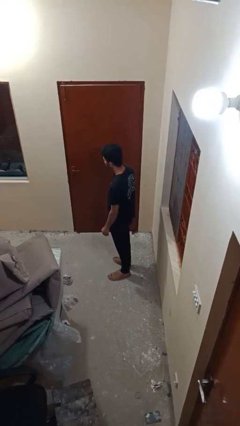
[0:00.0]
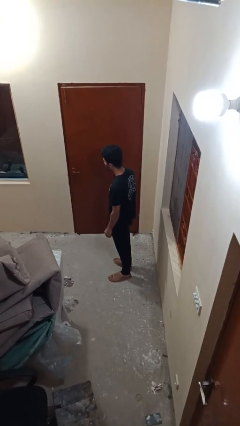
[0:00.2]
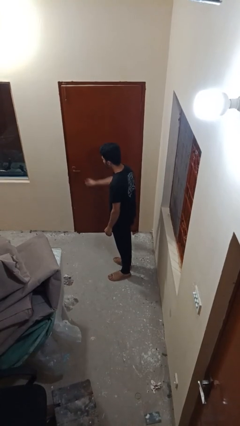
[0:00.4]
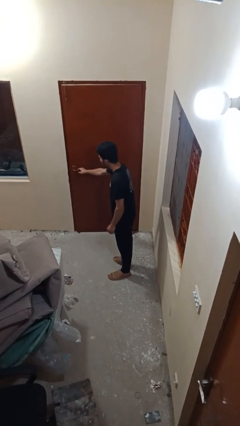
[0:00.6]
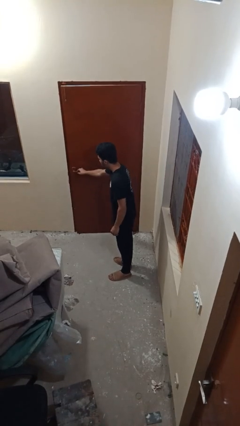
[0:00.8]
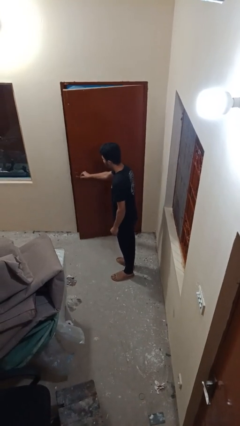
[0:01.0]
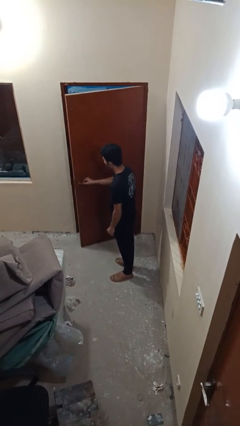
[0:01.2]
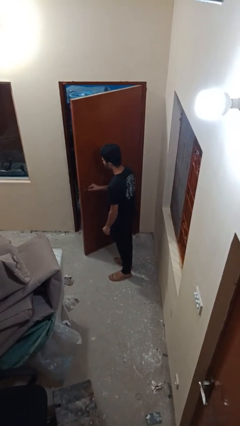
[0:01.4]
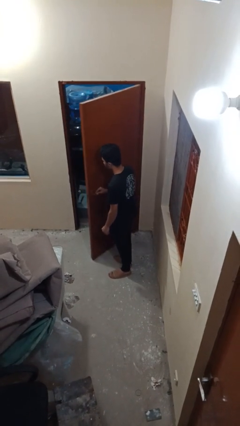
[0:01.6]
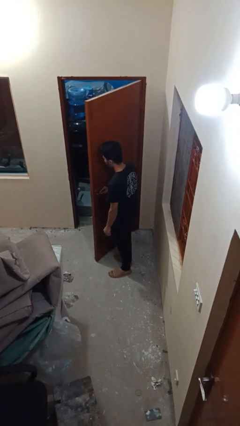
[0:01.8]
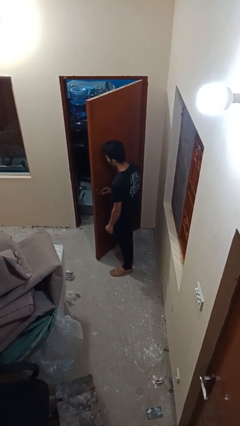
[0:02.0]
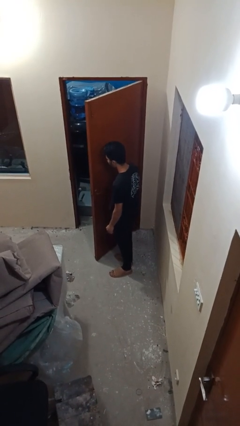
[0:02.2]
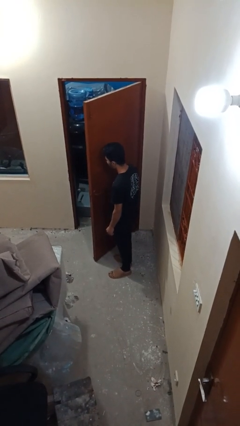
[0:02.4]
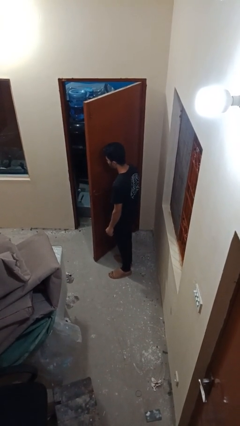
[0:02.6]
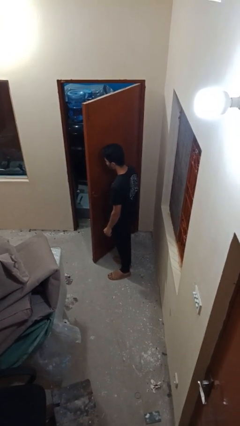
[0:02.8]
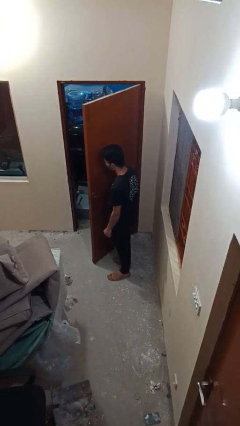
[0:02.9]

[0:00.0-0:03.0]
person opens facility door

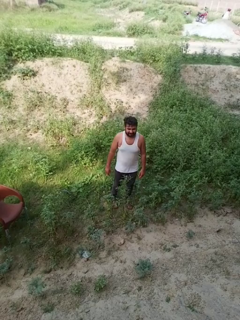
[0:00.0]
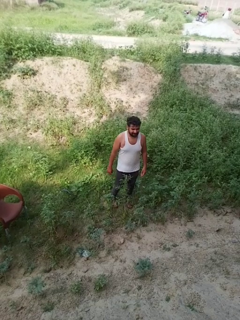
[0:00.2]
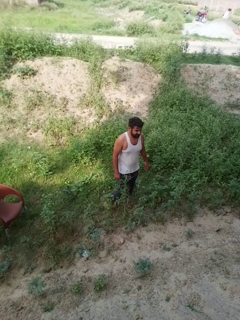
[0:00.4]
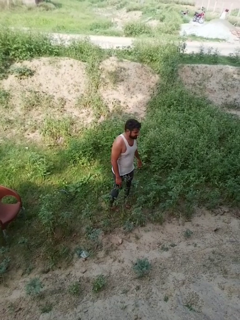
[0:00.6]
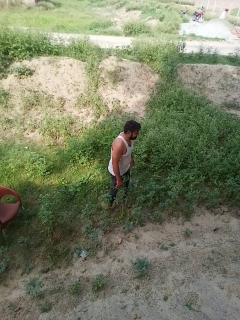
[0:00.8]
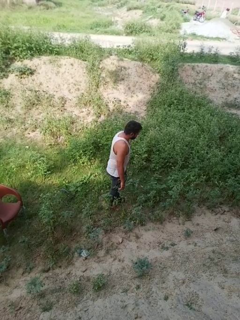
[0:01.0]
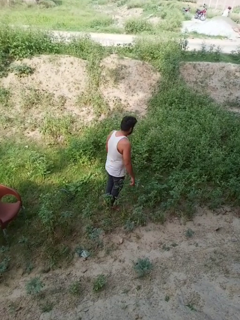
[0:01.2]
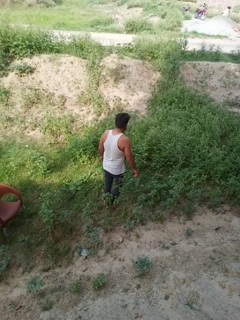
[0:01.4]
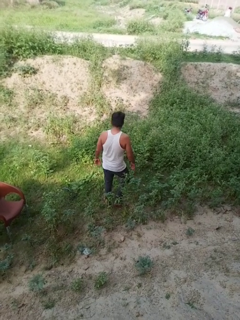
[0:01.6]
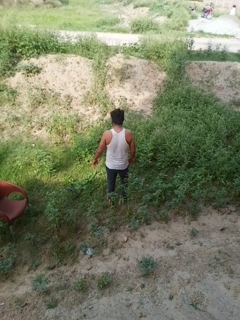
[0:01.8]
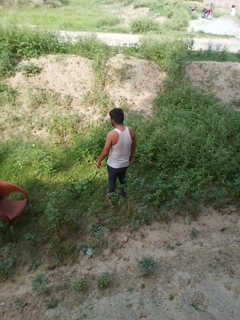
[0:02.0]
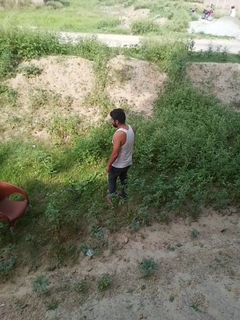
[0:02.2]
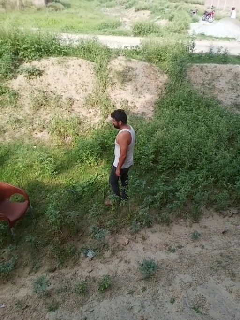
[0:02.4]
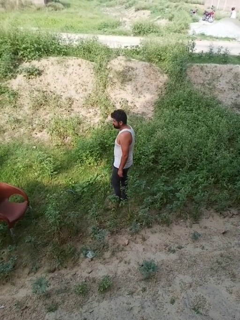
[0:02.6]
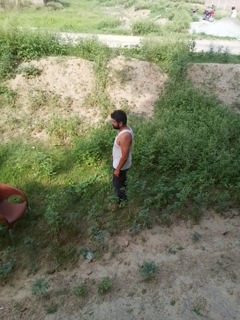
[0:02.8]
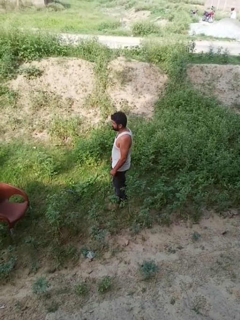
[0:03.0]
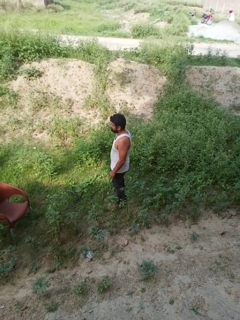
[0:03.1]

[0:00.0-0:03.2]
person twirls

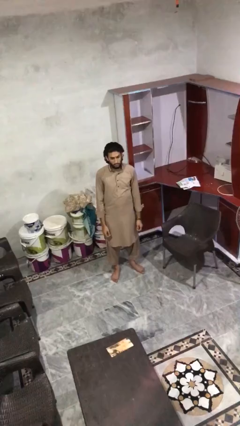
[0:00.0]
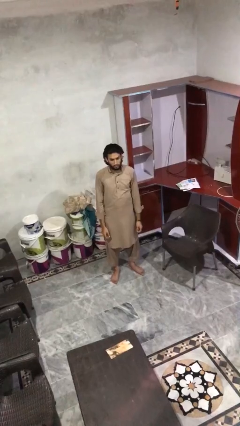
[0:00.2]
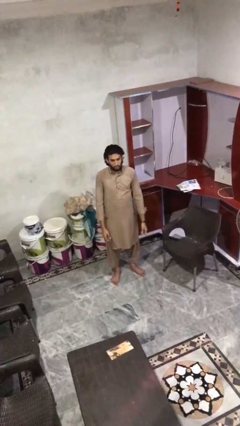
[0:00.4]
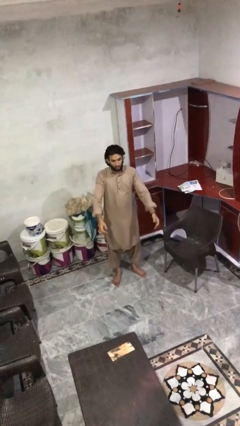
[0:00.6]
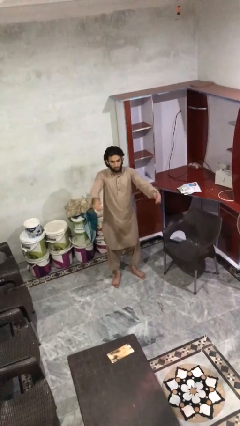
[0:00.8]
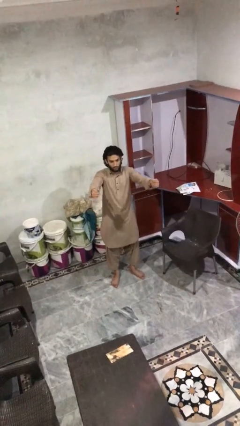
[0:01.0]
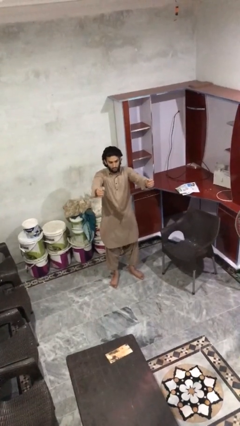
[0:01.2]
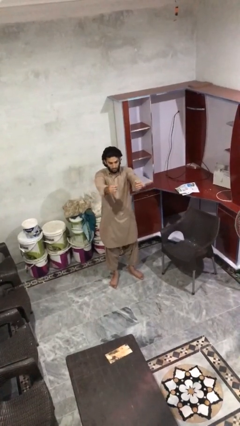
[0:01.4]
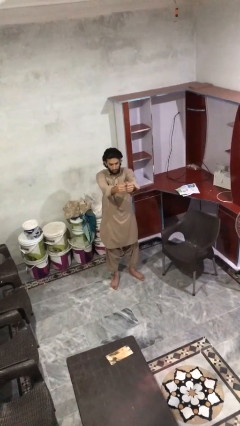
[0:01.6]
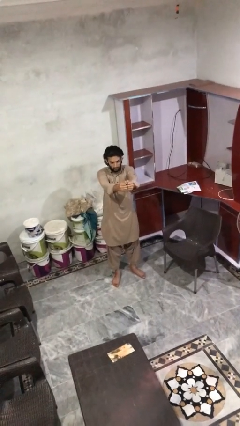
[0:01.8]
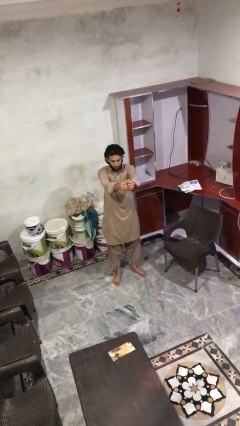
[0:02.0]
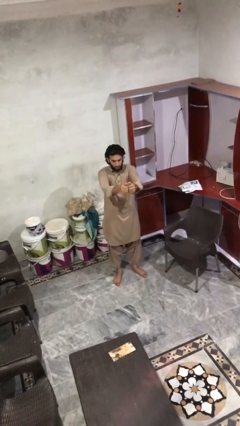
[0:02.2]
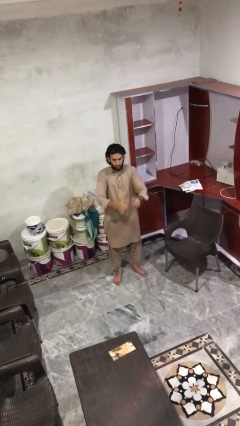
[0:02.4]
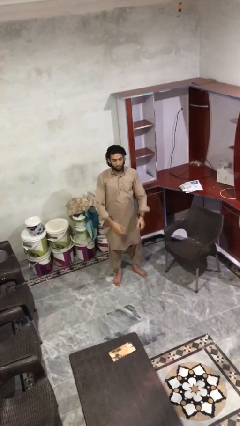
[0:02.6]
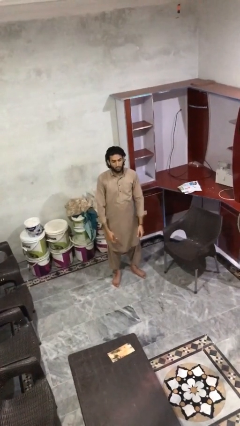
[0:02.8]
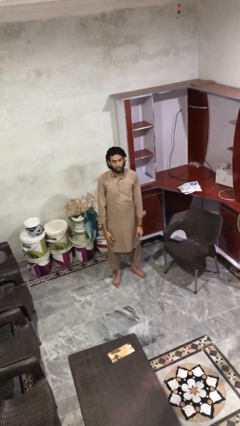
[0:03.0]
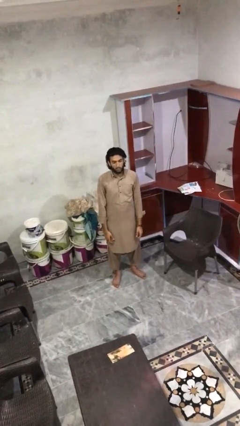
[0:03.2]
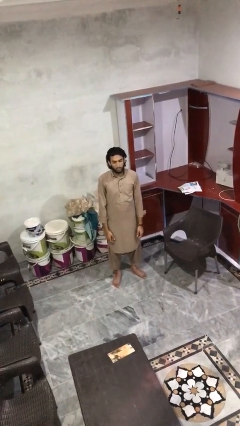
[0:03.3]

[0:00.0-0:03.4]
person gestures zoom out

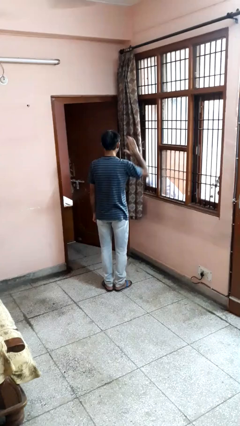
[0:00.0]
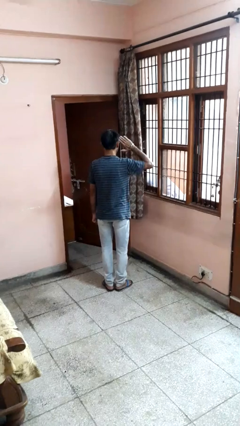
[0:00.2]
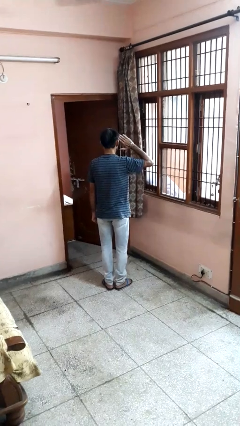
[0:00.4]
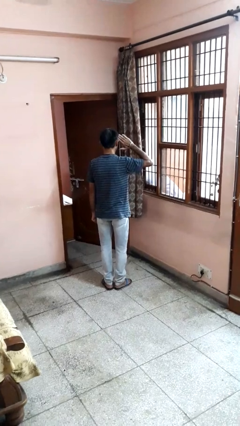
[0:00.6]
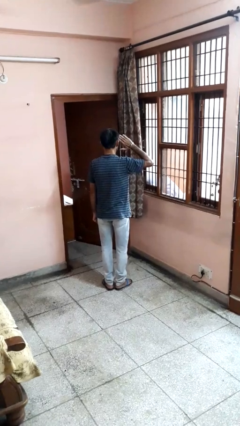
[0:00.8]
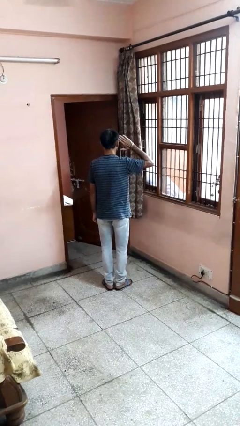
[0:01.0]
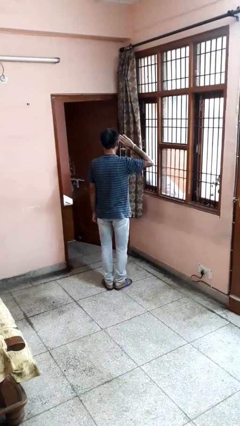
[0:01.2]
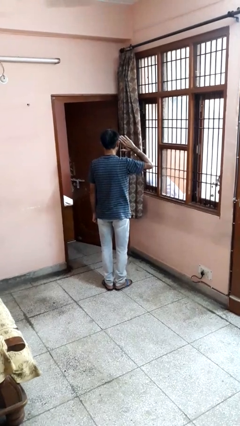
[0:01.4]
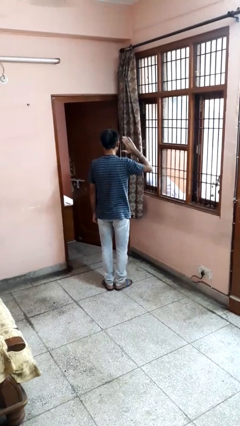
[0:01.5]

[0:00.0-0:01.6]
person salutes

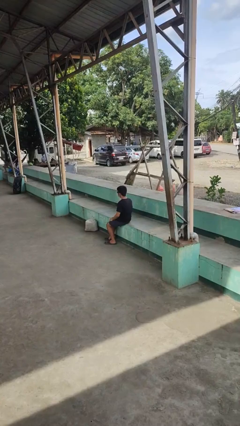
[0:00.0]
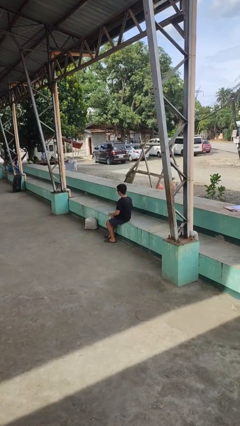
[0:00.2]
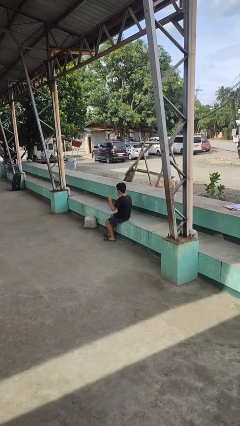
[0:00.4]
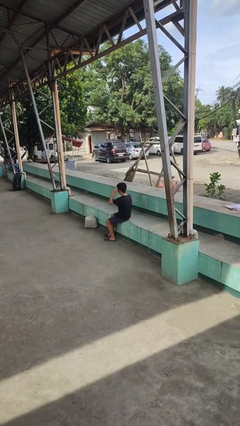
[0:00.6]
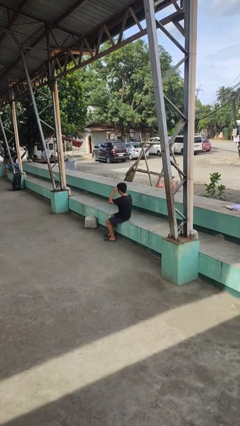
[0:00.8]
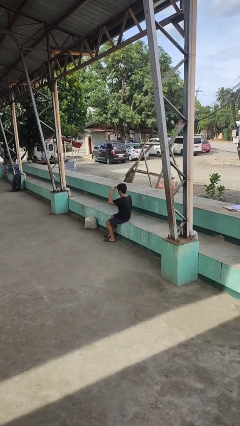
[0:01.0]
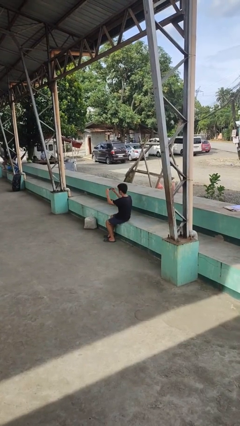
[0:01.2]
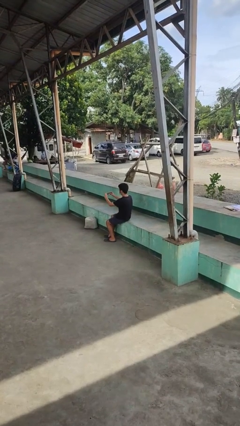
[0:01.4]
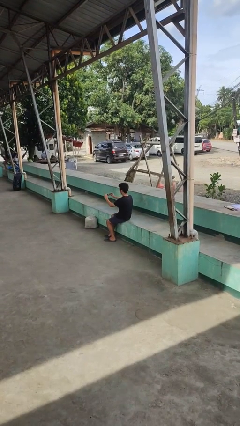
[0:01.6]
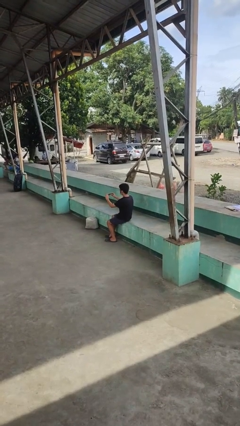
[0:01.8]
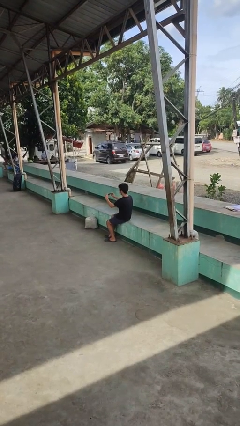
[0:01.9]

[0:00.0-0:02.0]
person takes off sunglasses

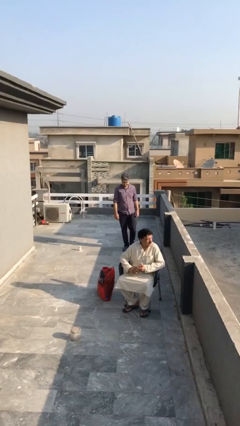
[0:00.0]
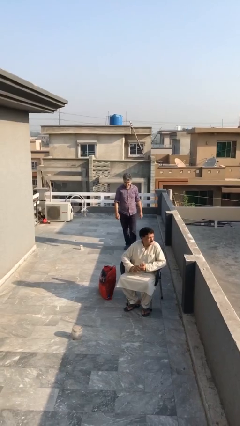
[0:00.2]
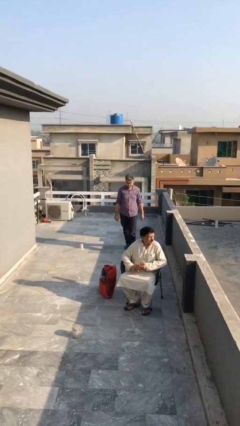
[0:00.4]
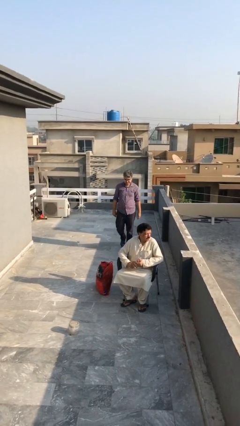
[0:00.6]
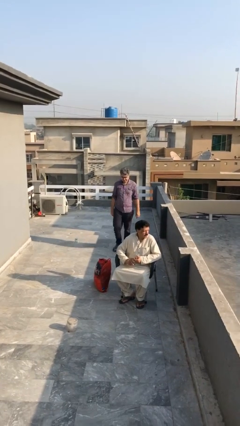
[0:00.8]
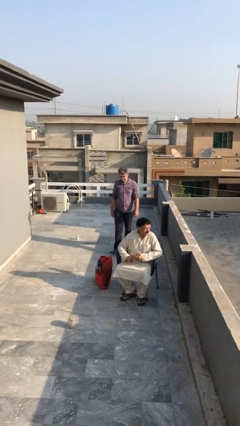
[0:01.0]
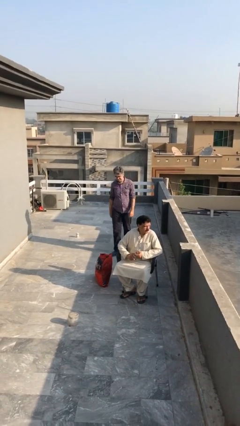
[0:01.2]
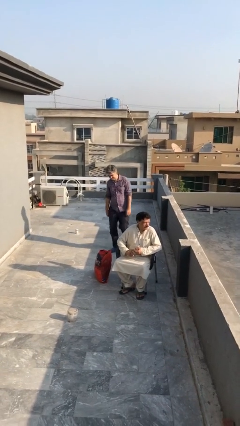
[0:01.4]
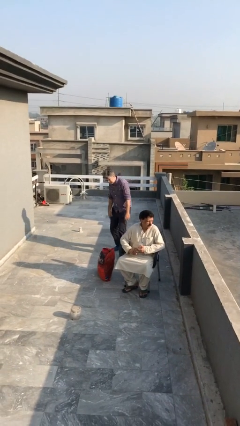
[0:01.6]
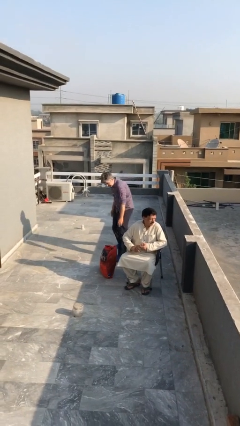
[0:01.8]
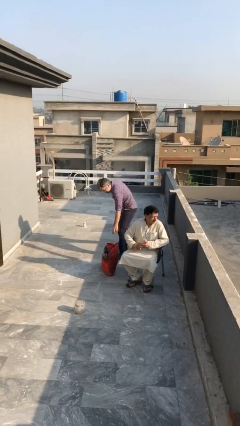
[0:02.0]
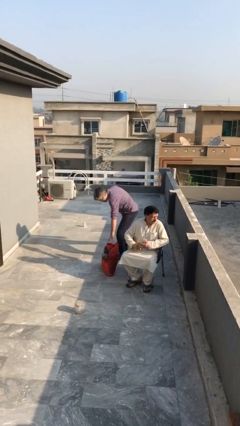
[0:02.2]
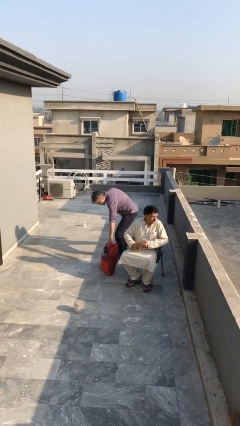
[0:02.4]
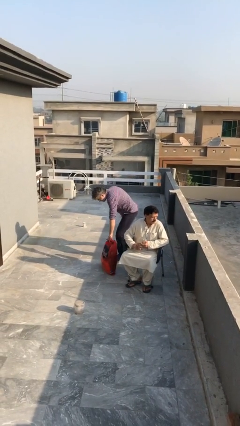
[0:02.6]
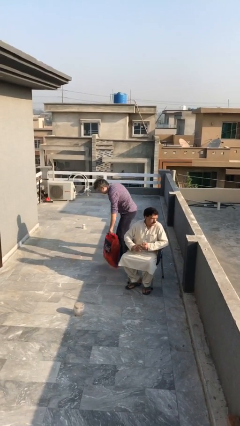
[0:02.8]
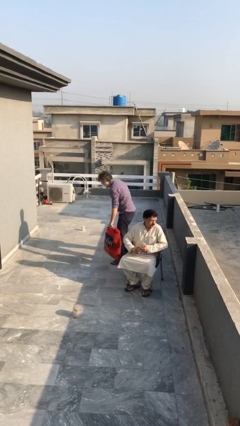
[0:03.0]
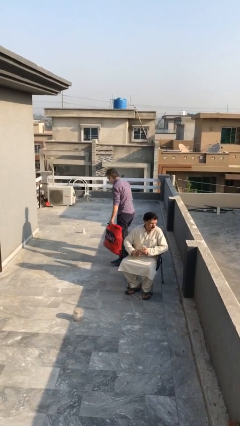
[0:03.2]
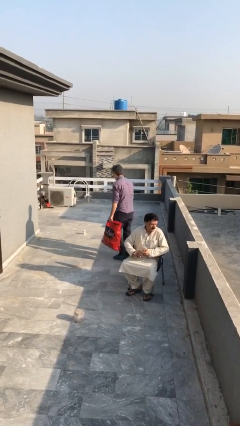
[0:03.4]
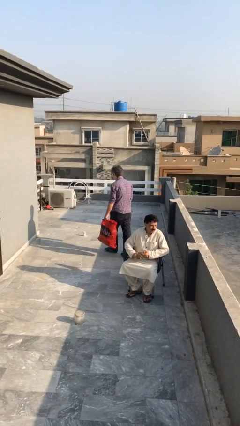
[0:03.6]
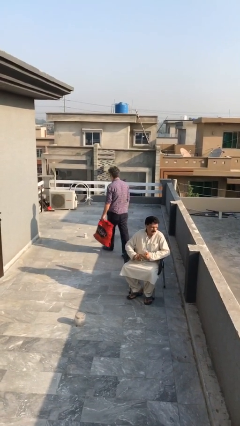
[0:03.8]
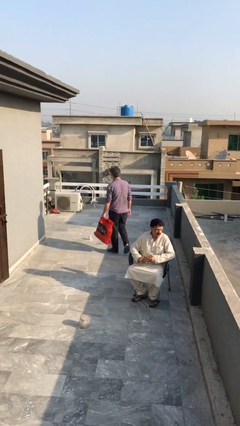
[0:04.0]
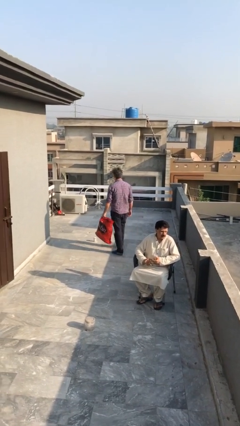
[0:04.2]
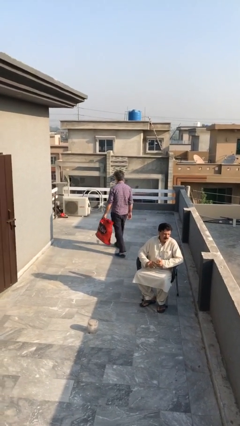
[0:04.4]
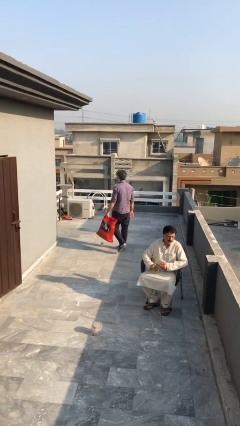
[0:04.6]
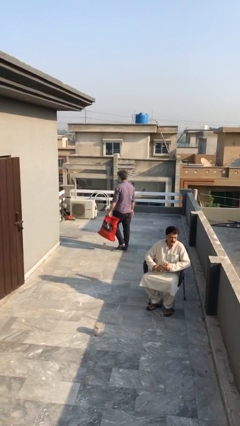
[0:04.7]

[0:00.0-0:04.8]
person steals object from person

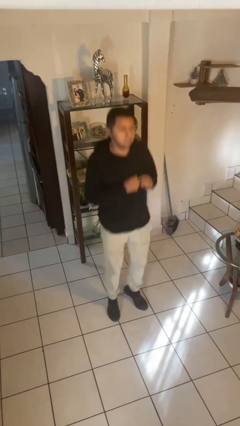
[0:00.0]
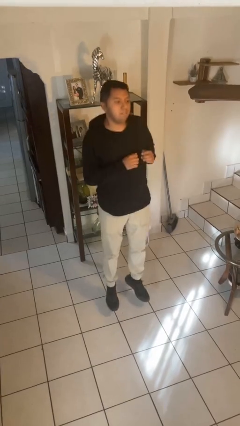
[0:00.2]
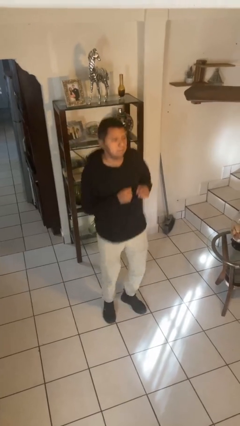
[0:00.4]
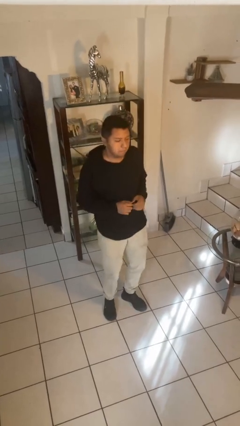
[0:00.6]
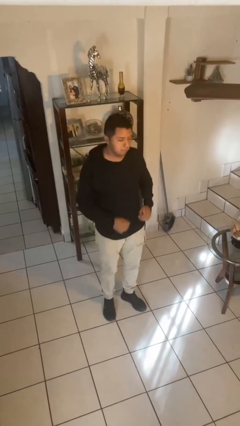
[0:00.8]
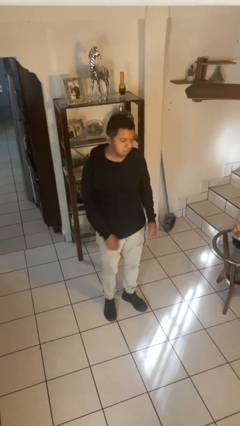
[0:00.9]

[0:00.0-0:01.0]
person jumps
